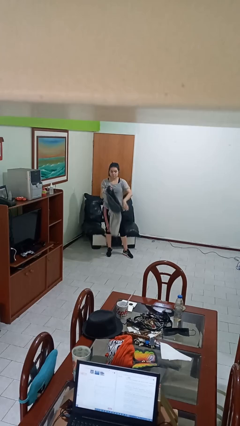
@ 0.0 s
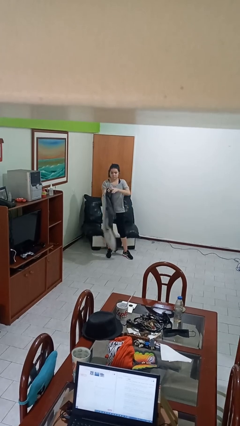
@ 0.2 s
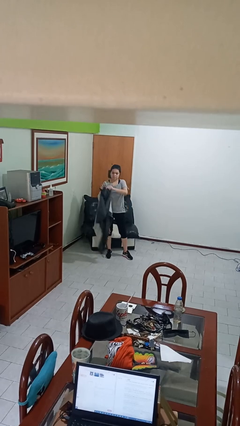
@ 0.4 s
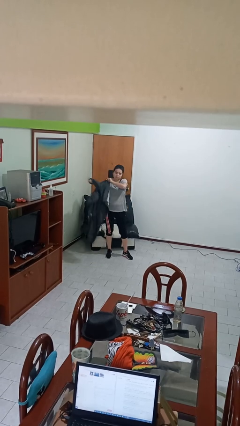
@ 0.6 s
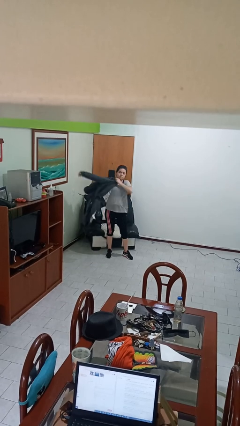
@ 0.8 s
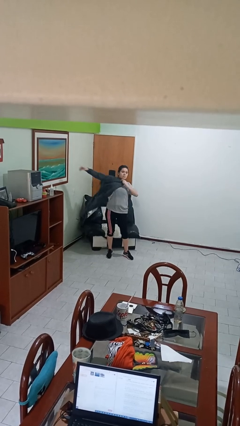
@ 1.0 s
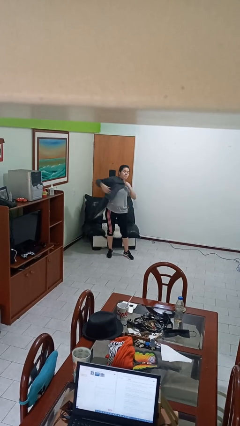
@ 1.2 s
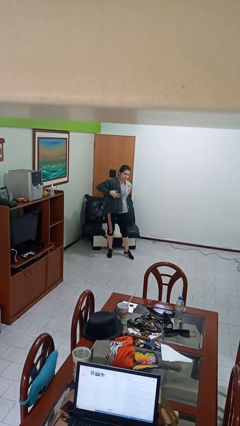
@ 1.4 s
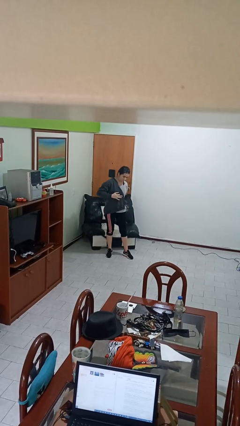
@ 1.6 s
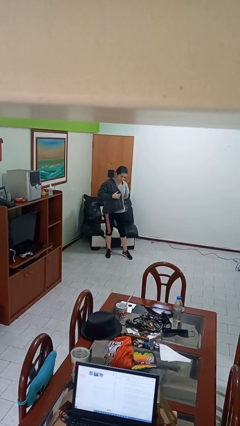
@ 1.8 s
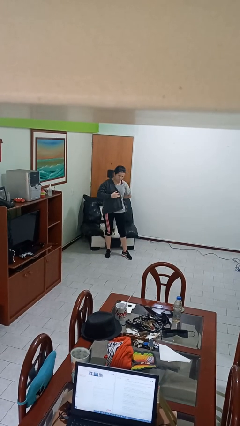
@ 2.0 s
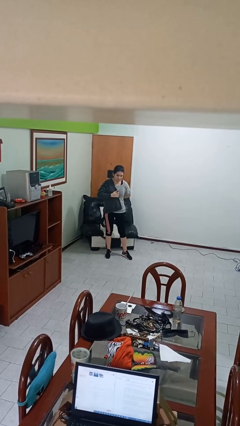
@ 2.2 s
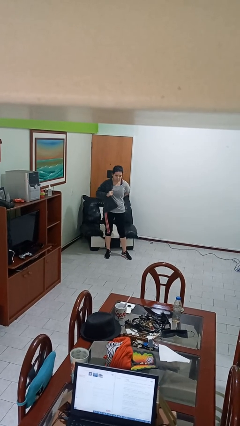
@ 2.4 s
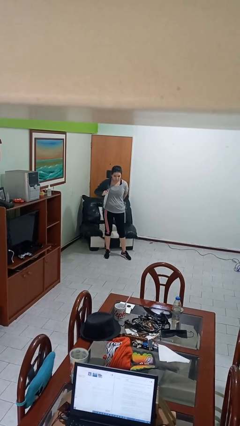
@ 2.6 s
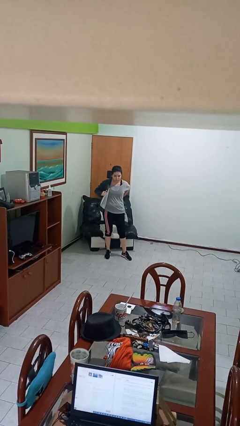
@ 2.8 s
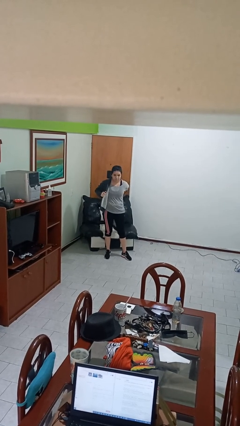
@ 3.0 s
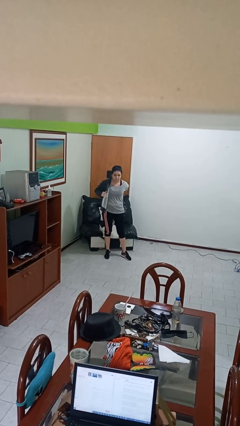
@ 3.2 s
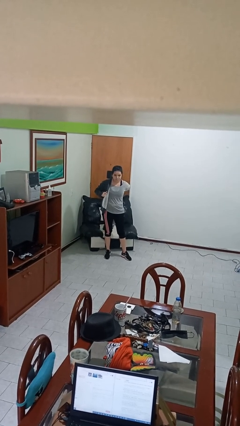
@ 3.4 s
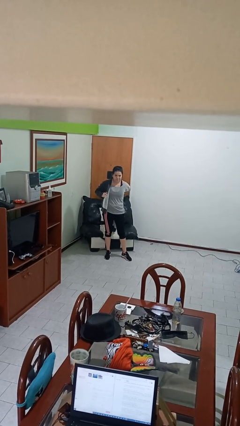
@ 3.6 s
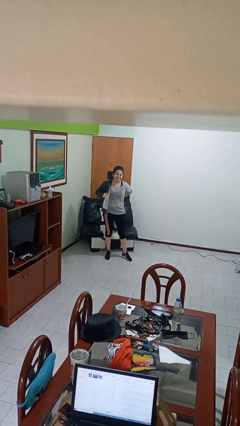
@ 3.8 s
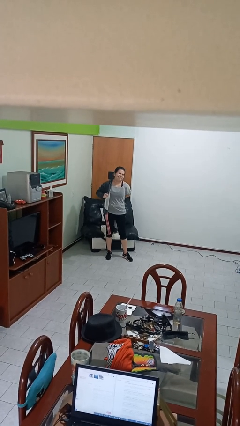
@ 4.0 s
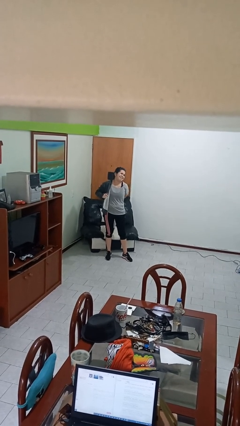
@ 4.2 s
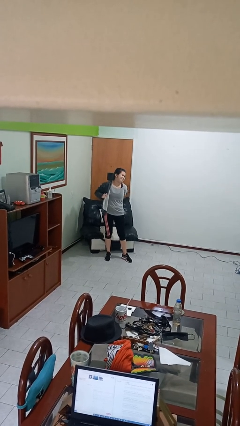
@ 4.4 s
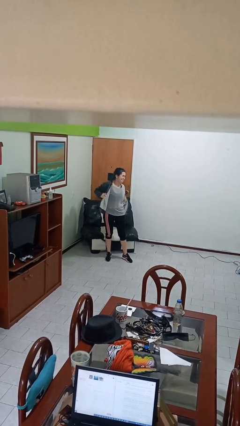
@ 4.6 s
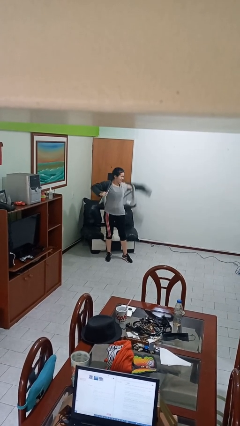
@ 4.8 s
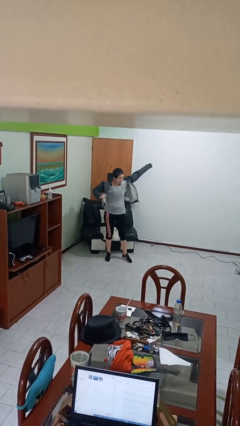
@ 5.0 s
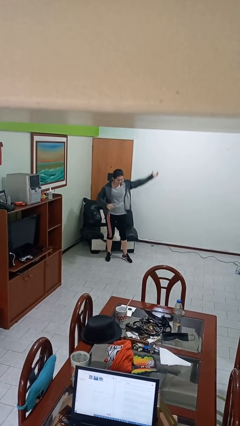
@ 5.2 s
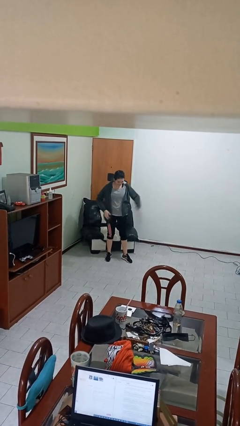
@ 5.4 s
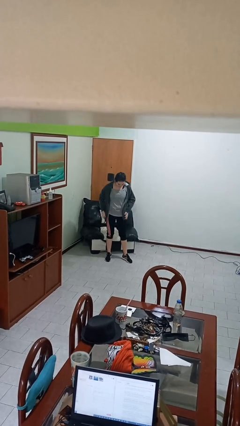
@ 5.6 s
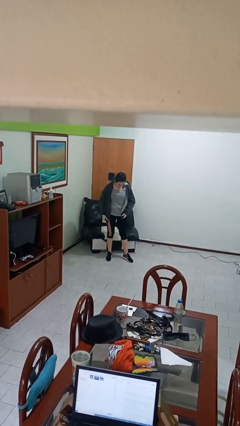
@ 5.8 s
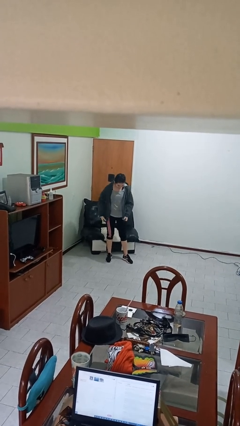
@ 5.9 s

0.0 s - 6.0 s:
person puts on jacket

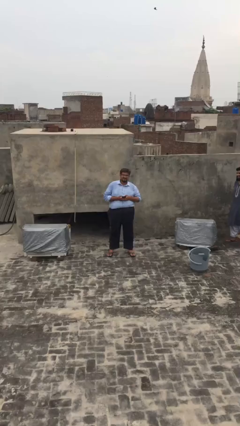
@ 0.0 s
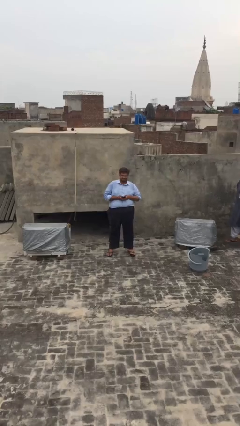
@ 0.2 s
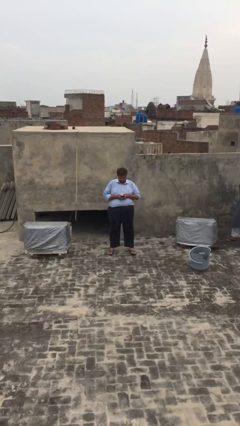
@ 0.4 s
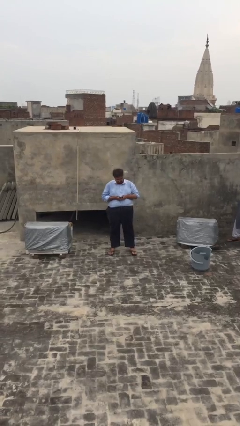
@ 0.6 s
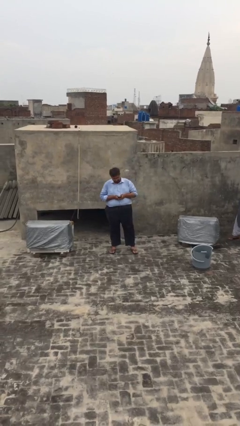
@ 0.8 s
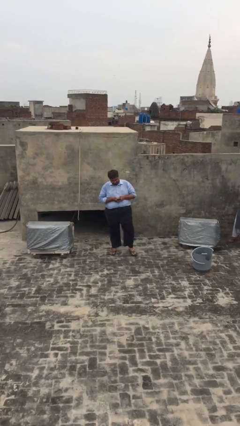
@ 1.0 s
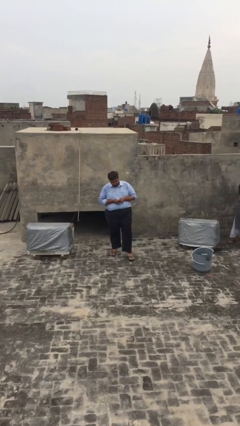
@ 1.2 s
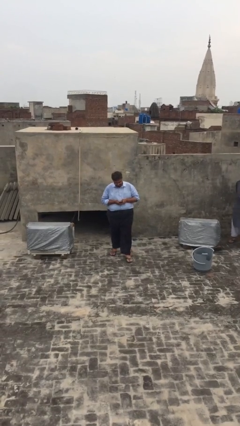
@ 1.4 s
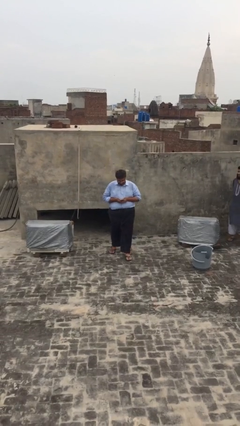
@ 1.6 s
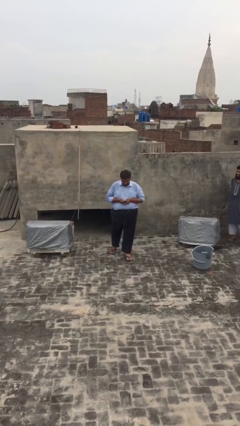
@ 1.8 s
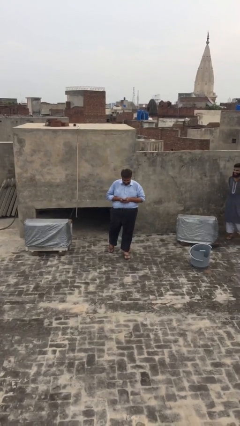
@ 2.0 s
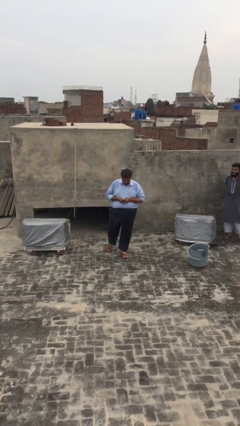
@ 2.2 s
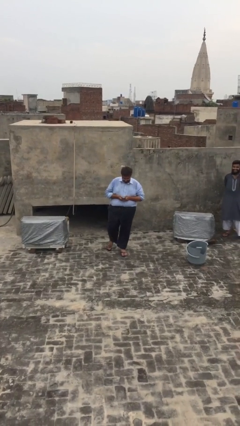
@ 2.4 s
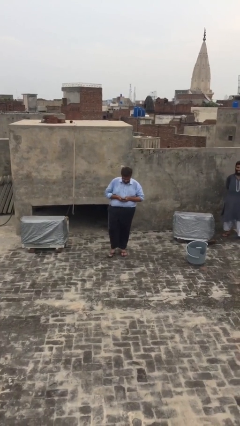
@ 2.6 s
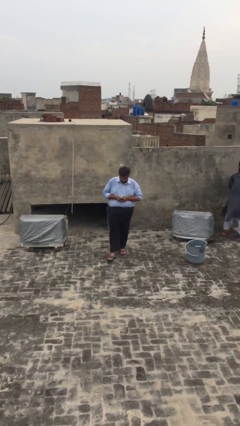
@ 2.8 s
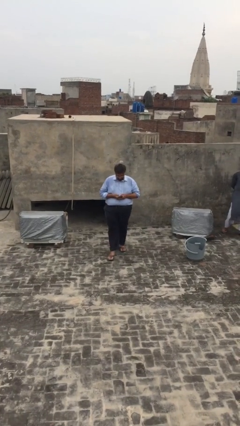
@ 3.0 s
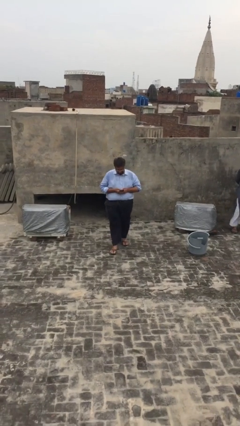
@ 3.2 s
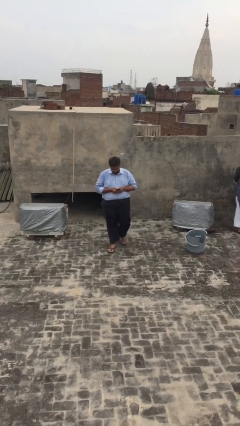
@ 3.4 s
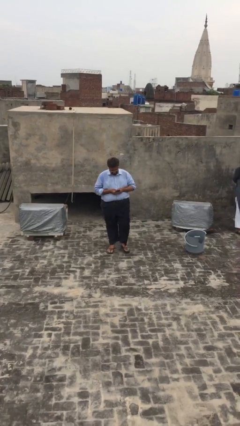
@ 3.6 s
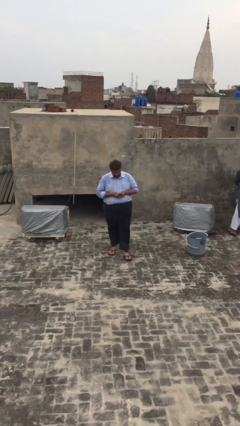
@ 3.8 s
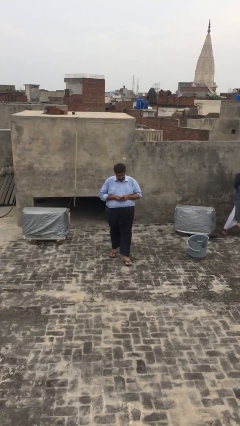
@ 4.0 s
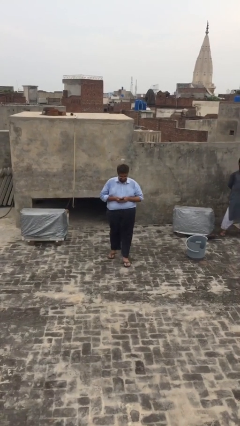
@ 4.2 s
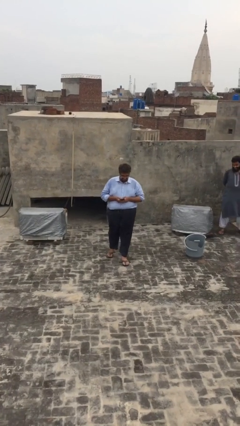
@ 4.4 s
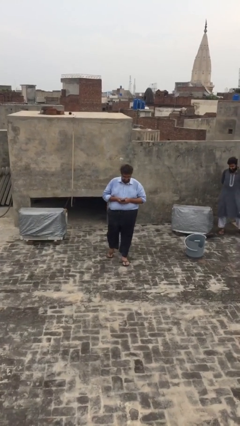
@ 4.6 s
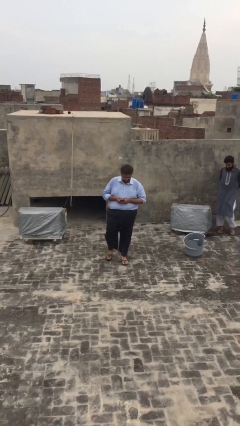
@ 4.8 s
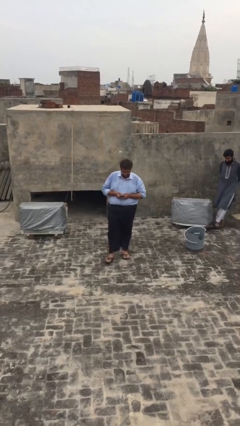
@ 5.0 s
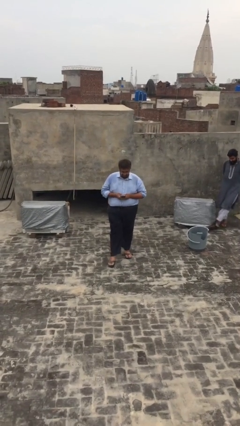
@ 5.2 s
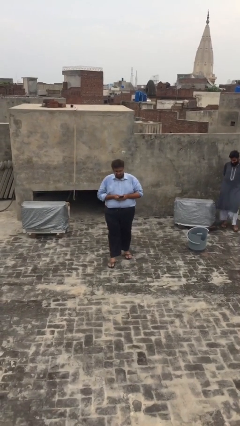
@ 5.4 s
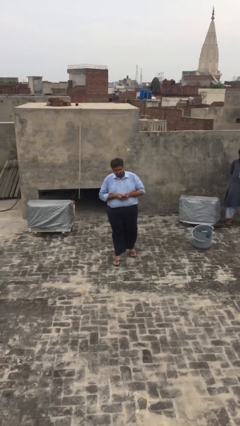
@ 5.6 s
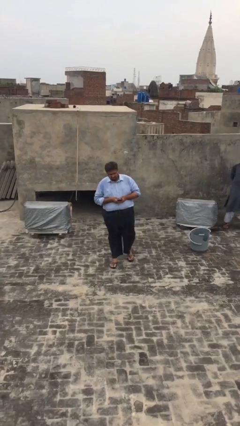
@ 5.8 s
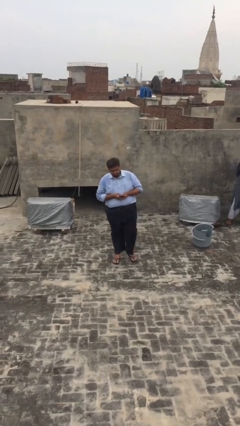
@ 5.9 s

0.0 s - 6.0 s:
person texts on phone

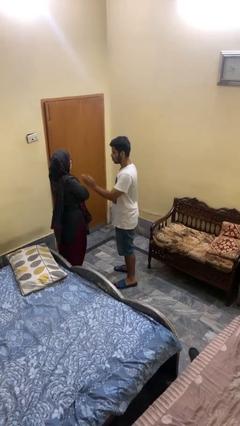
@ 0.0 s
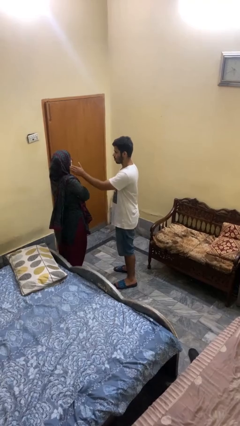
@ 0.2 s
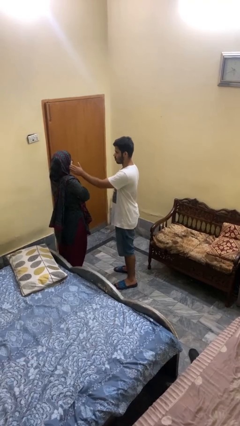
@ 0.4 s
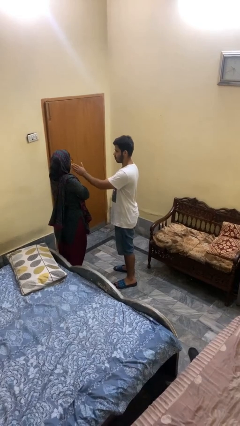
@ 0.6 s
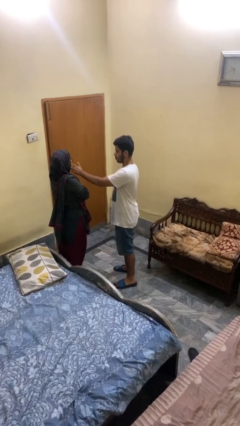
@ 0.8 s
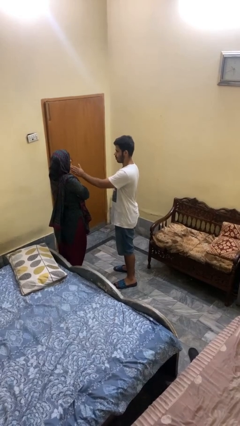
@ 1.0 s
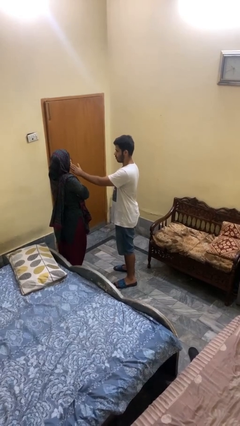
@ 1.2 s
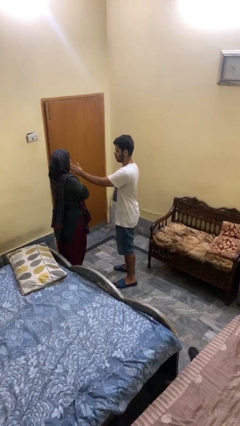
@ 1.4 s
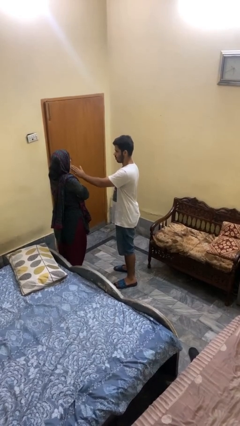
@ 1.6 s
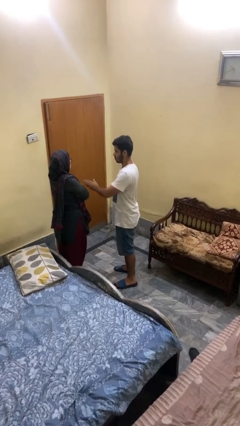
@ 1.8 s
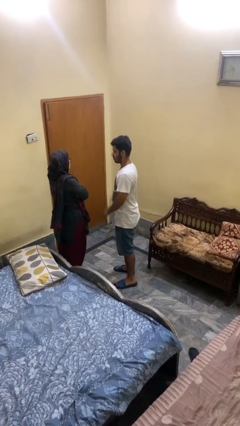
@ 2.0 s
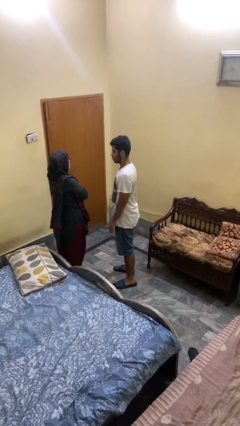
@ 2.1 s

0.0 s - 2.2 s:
person touches face of person

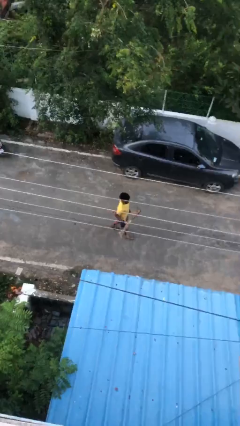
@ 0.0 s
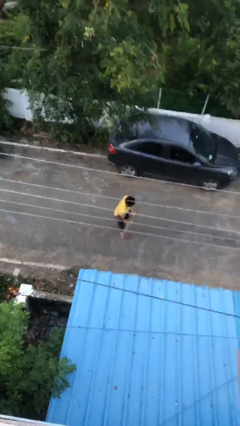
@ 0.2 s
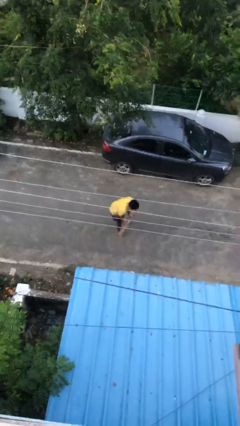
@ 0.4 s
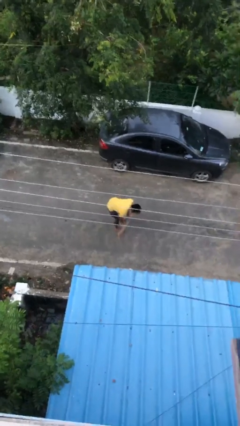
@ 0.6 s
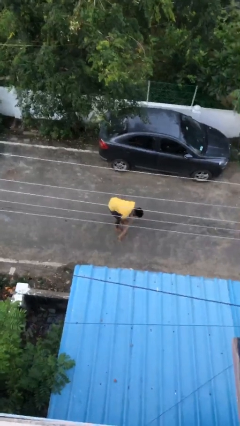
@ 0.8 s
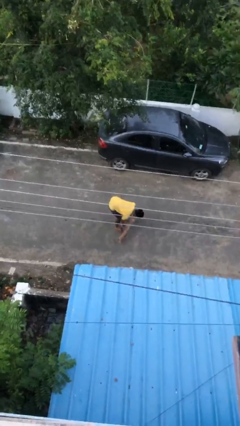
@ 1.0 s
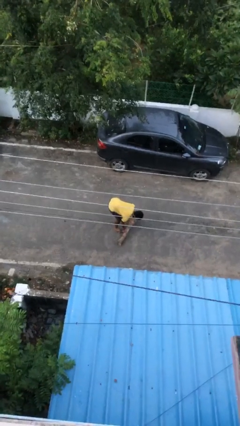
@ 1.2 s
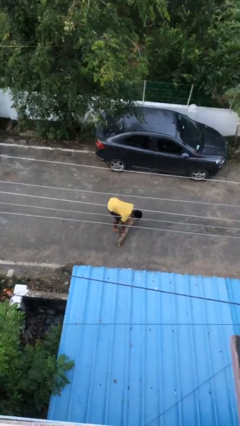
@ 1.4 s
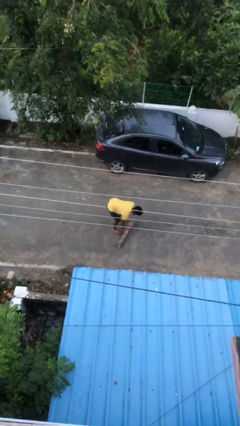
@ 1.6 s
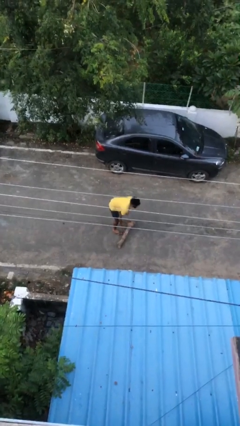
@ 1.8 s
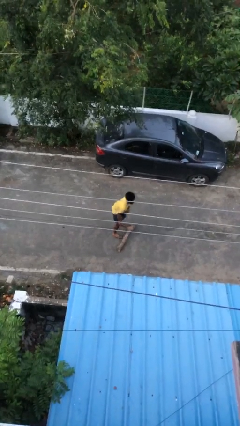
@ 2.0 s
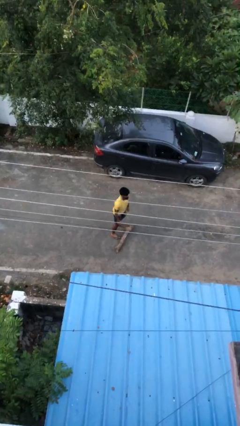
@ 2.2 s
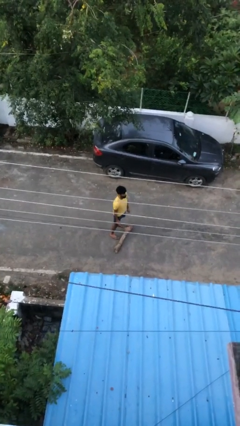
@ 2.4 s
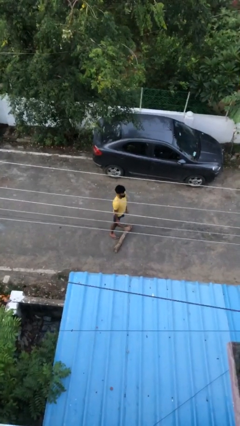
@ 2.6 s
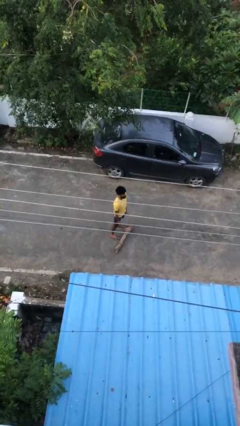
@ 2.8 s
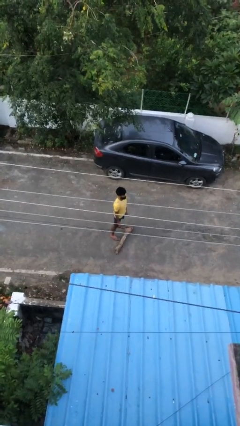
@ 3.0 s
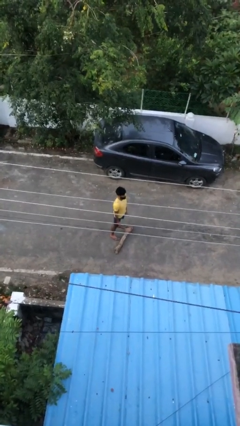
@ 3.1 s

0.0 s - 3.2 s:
person puts down object on floor

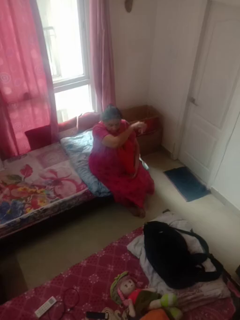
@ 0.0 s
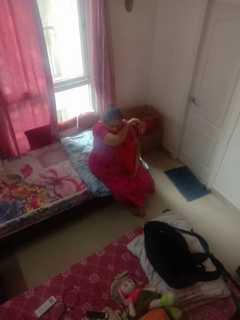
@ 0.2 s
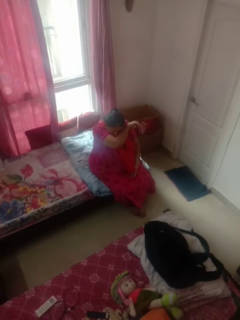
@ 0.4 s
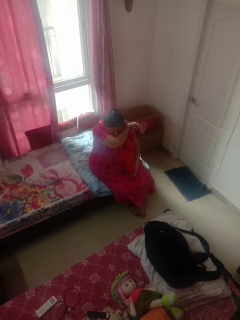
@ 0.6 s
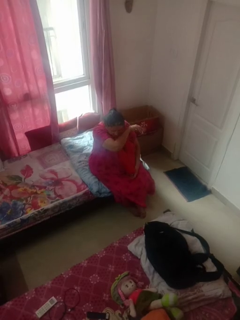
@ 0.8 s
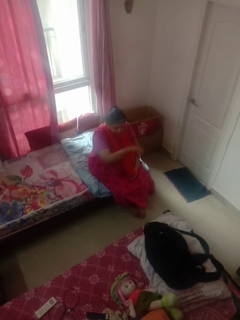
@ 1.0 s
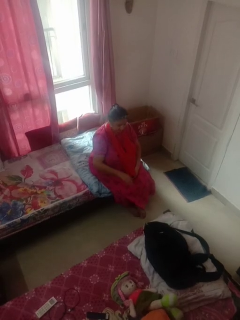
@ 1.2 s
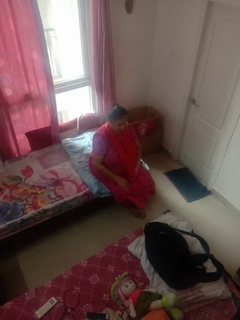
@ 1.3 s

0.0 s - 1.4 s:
person sneezes into arm
